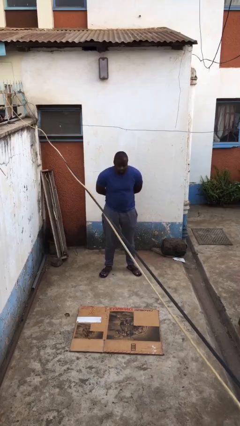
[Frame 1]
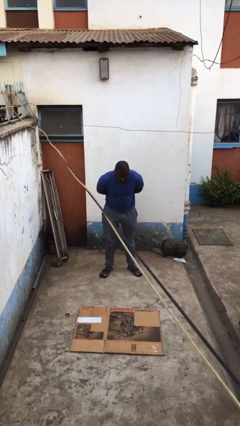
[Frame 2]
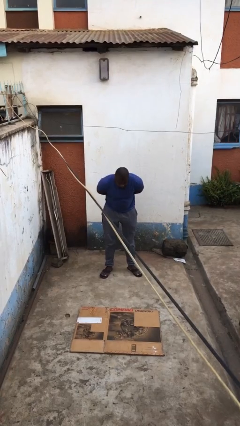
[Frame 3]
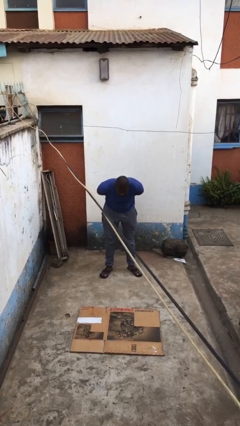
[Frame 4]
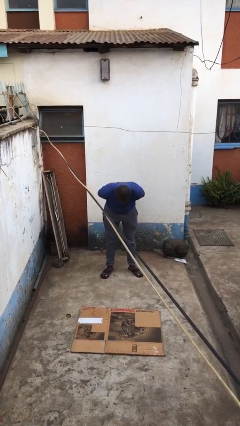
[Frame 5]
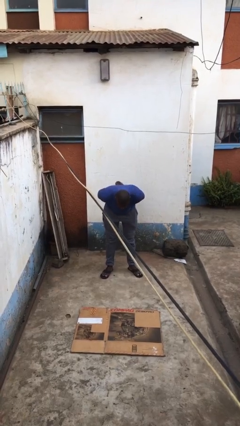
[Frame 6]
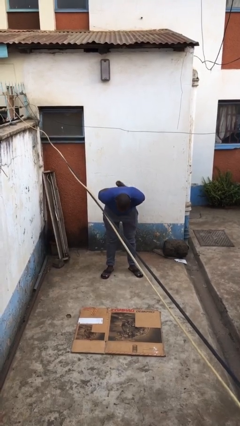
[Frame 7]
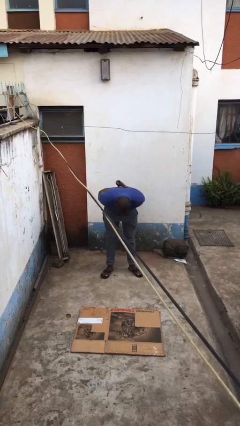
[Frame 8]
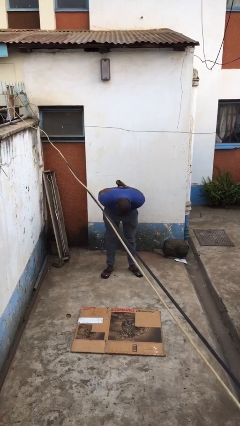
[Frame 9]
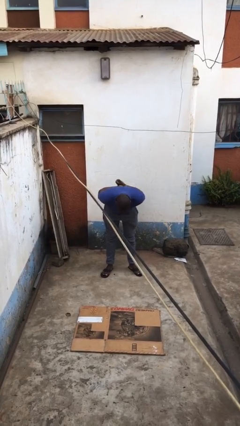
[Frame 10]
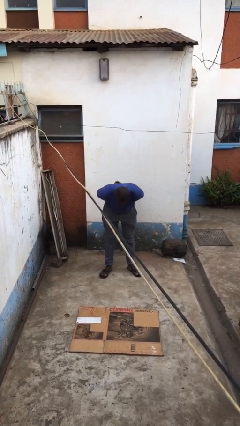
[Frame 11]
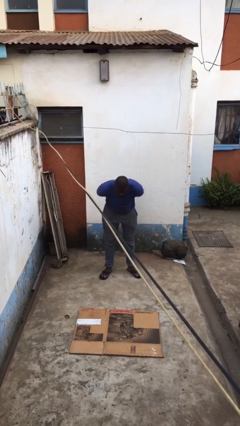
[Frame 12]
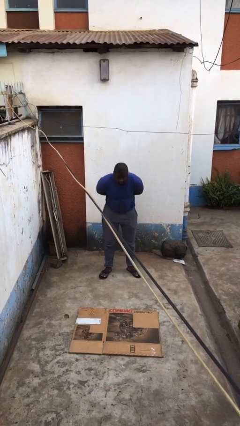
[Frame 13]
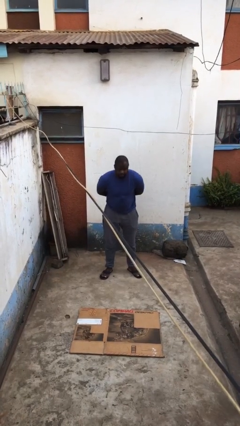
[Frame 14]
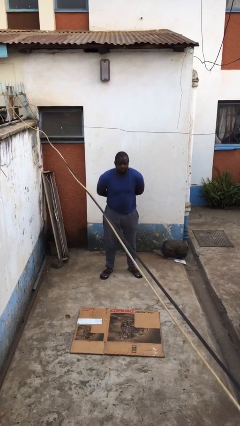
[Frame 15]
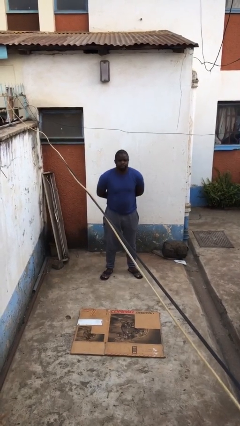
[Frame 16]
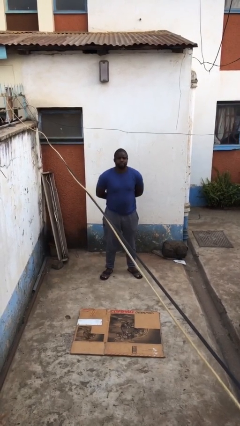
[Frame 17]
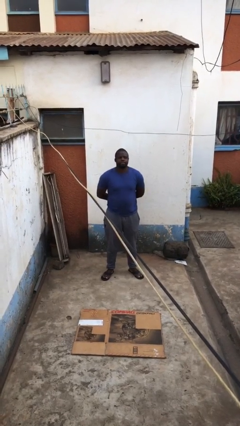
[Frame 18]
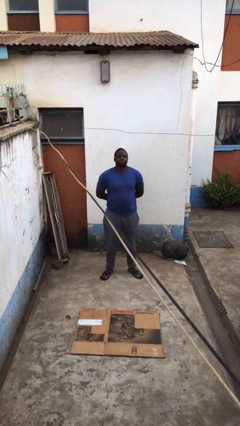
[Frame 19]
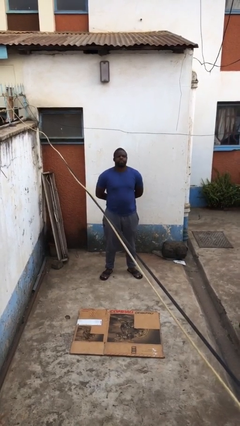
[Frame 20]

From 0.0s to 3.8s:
person bows

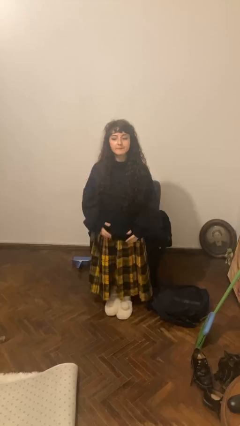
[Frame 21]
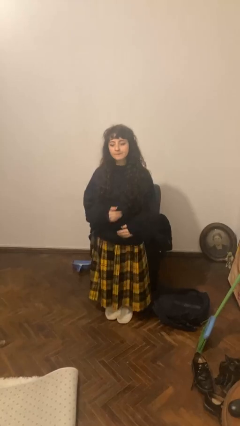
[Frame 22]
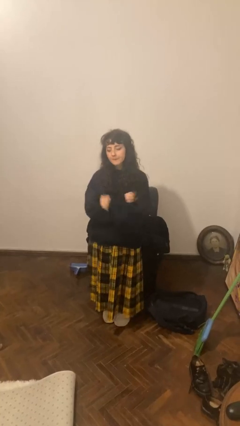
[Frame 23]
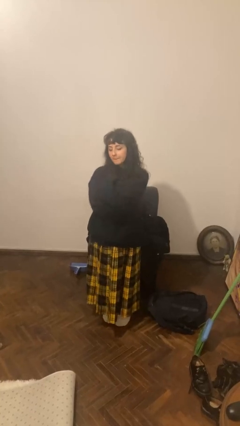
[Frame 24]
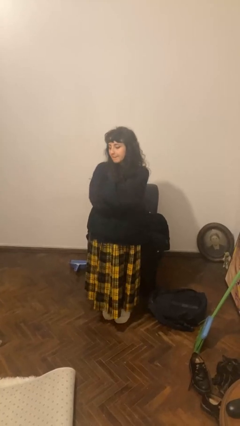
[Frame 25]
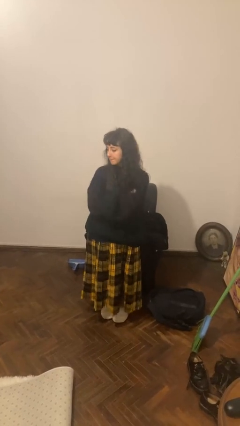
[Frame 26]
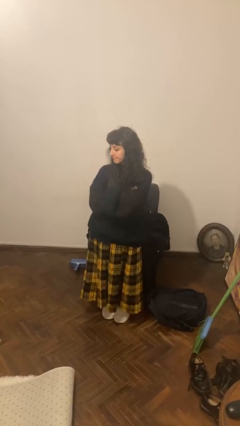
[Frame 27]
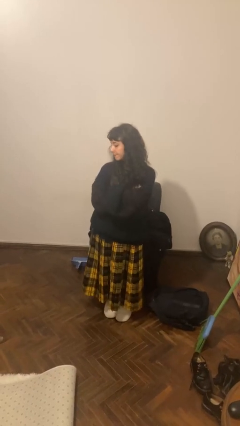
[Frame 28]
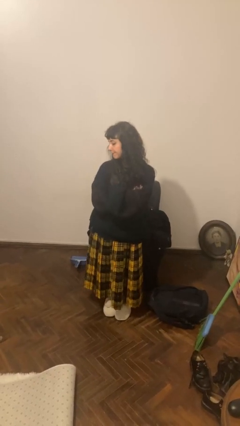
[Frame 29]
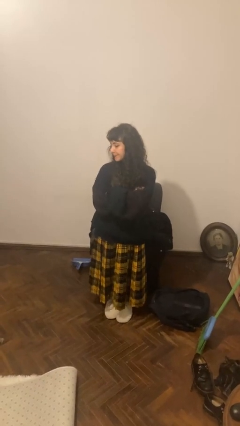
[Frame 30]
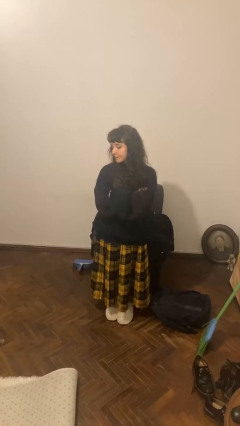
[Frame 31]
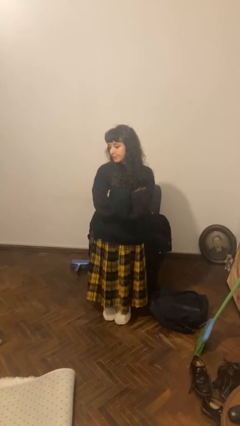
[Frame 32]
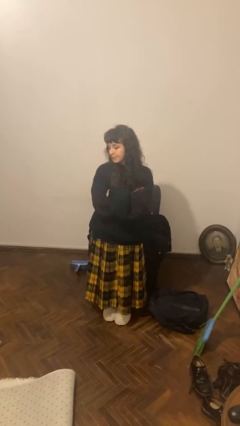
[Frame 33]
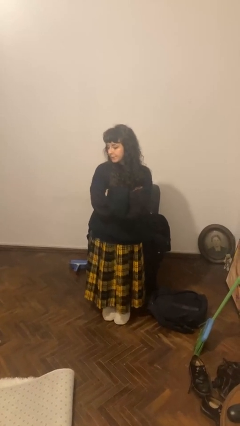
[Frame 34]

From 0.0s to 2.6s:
person crosses arms

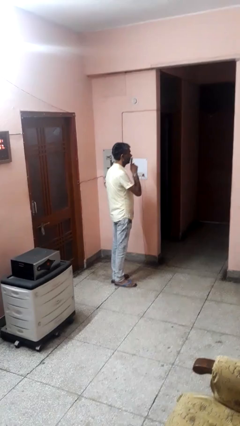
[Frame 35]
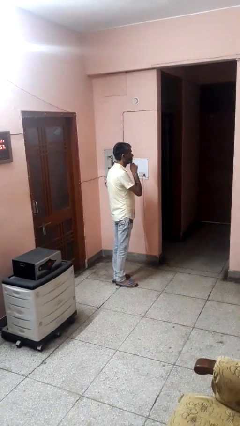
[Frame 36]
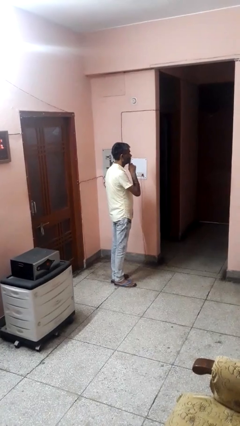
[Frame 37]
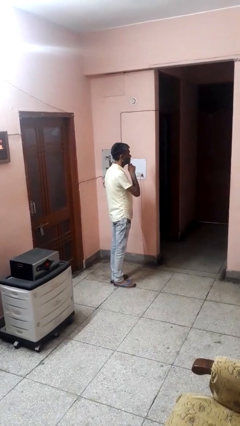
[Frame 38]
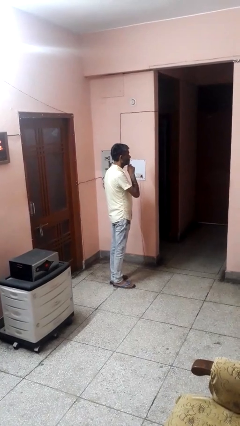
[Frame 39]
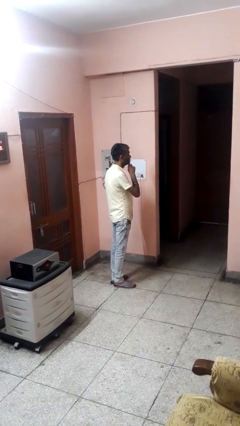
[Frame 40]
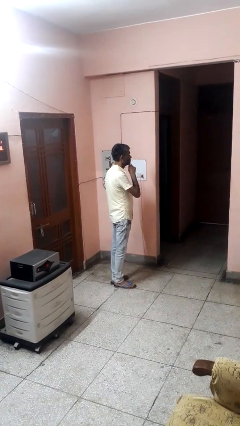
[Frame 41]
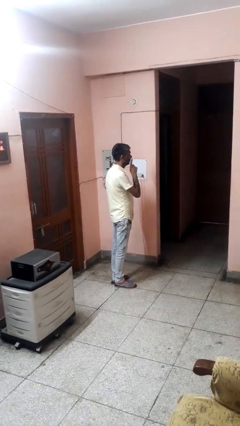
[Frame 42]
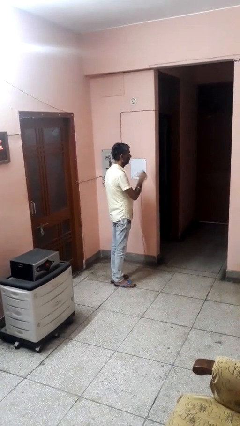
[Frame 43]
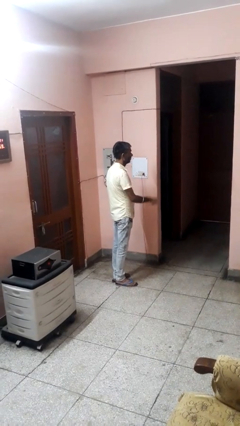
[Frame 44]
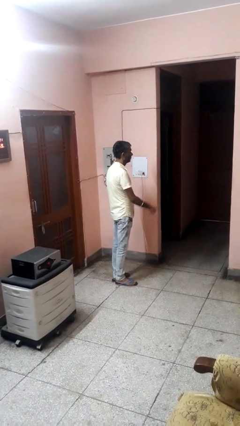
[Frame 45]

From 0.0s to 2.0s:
person gestures be quiet

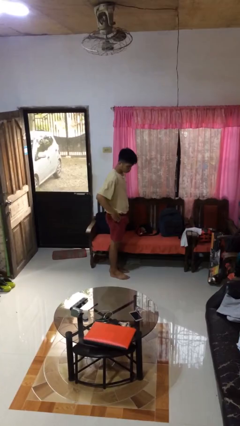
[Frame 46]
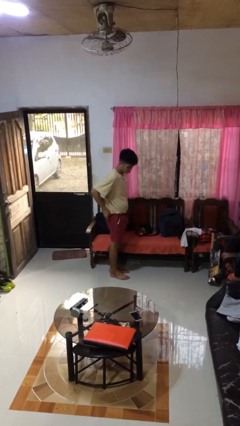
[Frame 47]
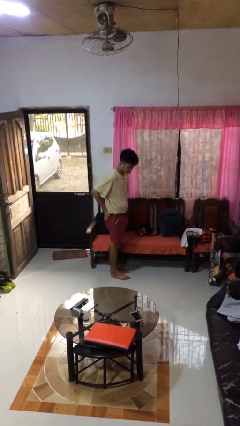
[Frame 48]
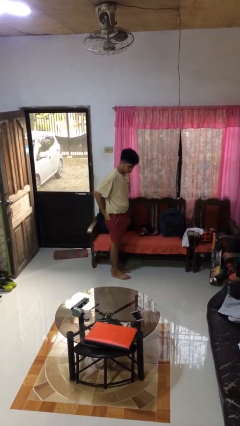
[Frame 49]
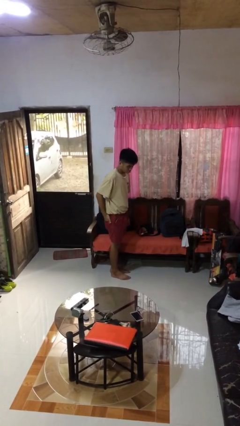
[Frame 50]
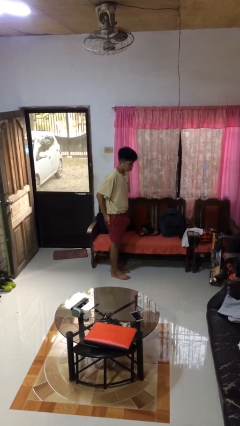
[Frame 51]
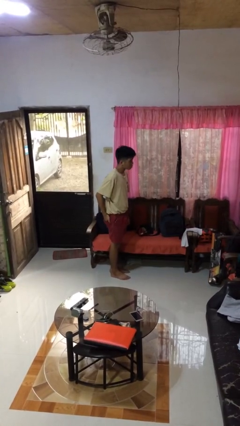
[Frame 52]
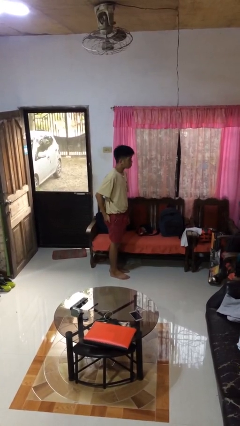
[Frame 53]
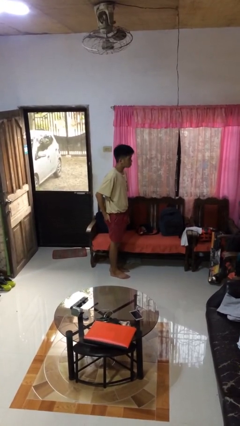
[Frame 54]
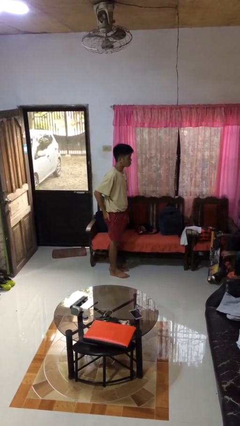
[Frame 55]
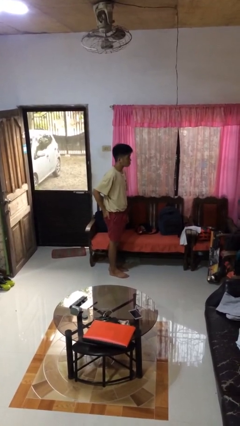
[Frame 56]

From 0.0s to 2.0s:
person puts hands in back pockets

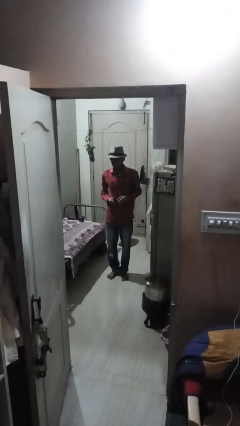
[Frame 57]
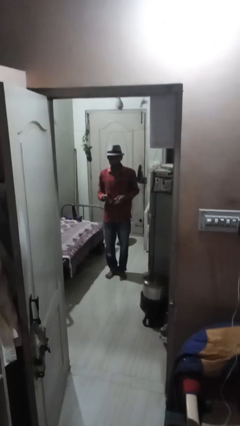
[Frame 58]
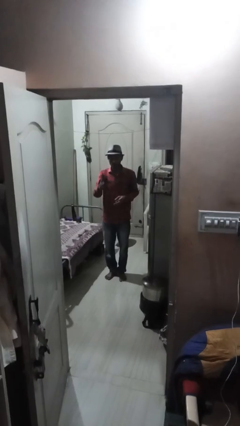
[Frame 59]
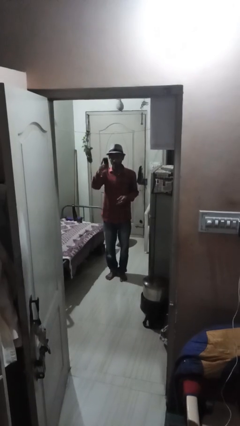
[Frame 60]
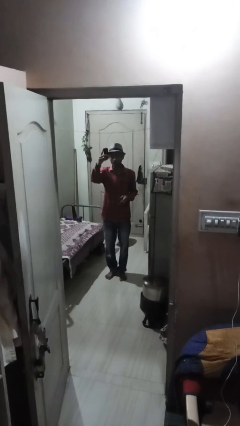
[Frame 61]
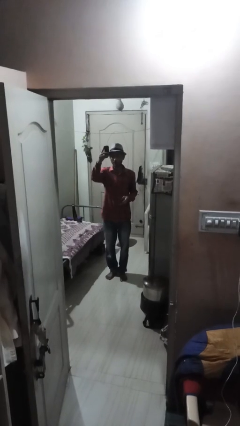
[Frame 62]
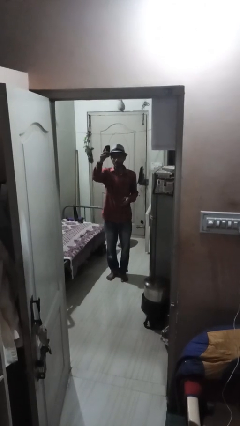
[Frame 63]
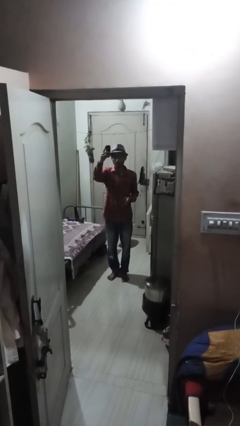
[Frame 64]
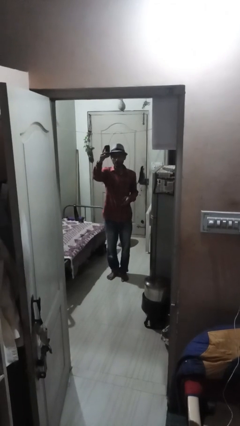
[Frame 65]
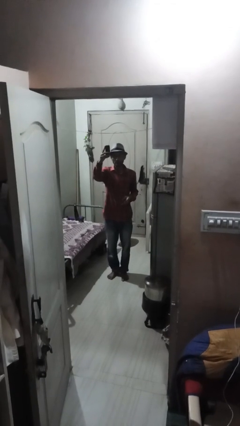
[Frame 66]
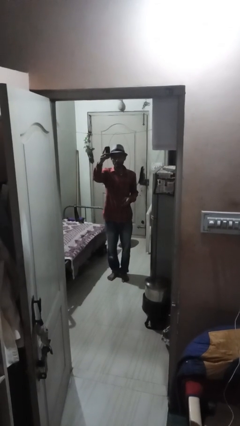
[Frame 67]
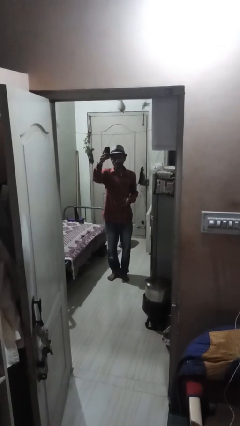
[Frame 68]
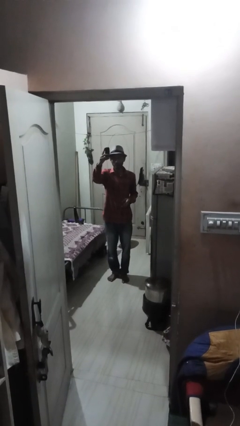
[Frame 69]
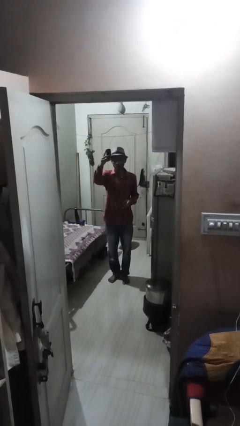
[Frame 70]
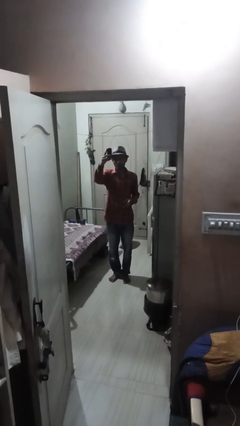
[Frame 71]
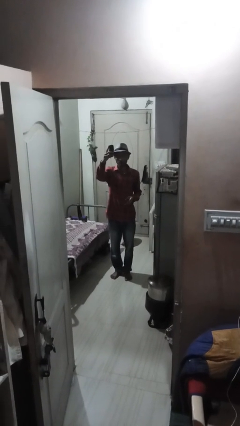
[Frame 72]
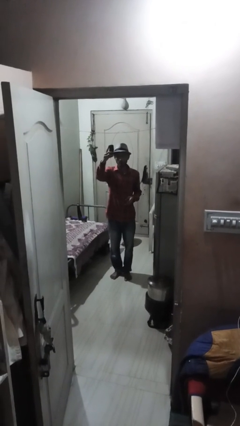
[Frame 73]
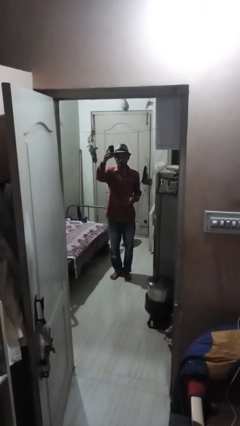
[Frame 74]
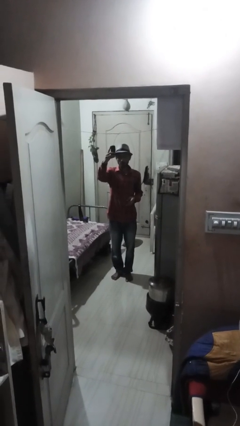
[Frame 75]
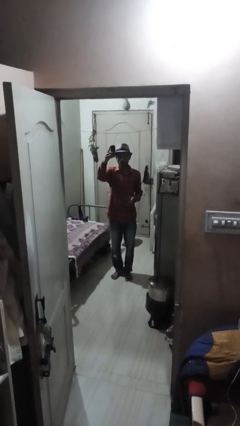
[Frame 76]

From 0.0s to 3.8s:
person takes selfie

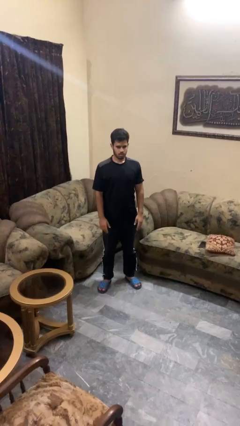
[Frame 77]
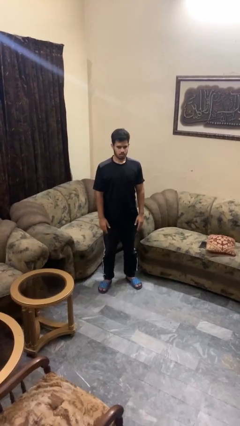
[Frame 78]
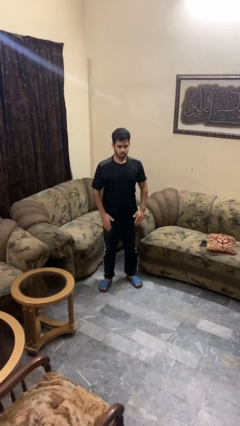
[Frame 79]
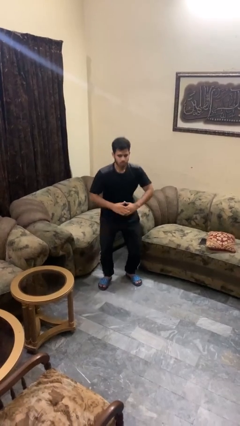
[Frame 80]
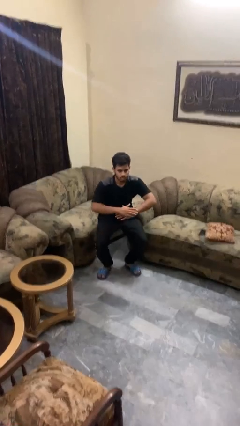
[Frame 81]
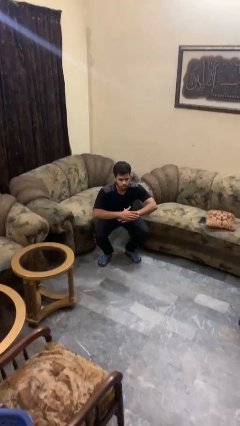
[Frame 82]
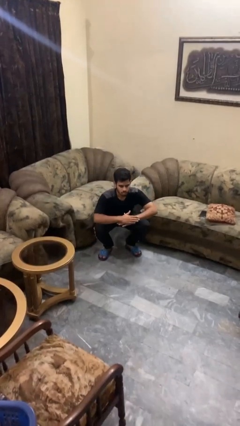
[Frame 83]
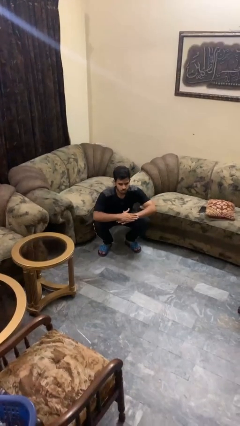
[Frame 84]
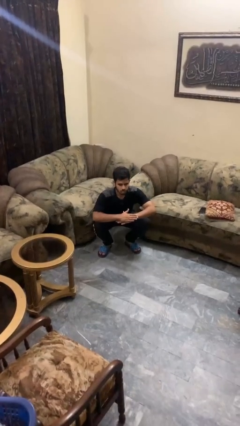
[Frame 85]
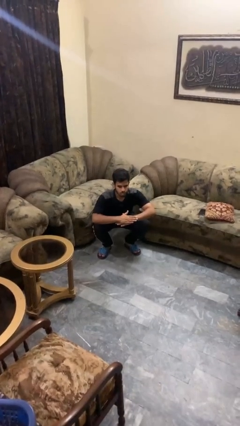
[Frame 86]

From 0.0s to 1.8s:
person squats

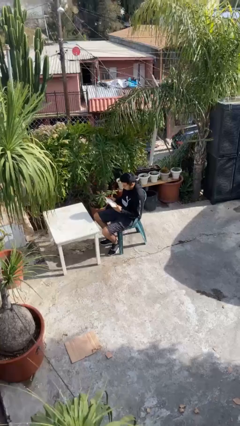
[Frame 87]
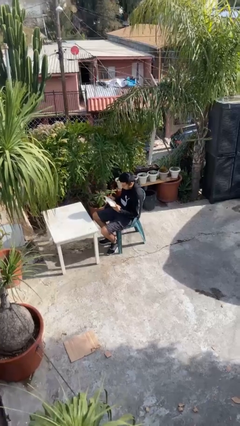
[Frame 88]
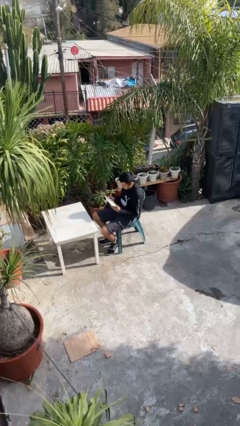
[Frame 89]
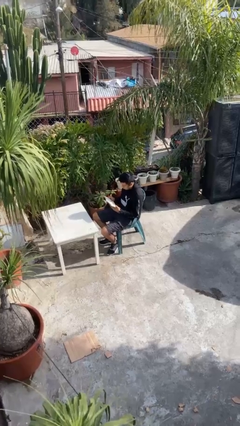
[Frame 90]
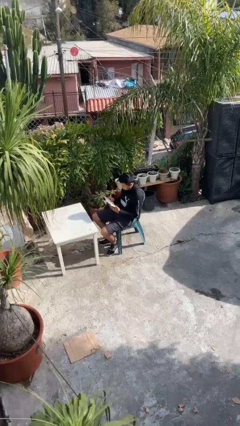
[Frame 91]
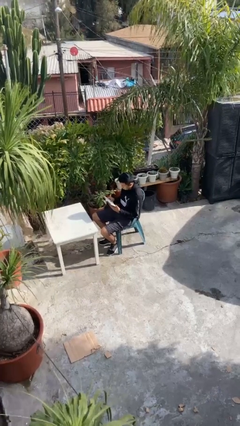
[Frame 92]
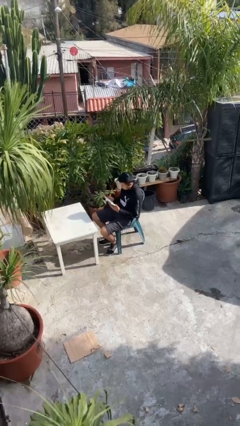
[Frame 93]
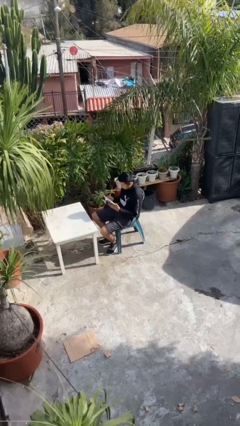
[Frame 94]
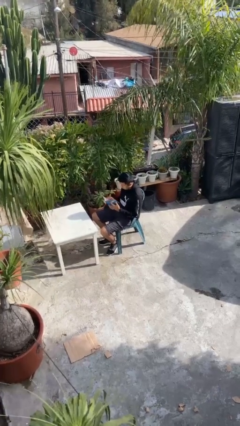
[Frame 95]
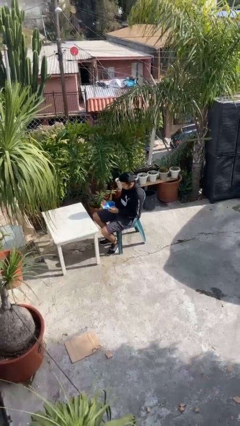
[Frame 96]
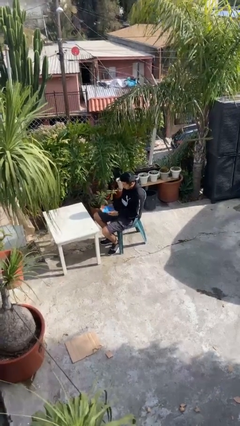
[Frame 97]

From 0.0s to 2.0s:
person reads document
